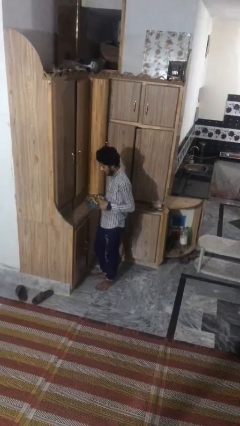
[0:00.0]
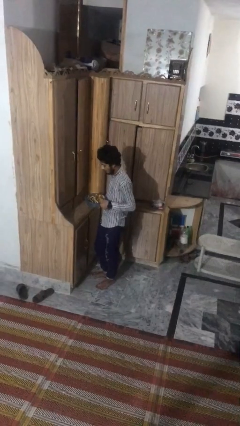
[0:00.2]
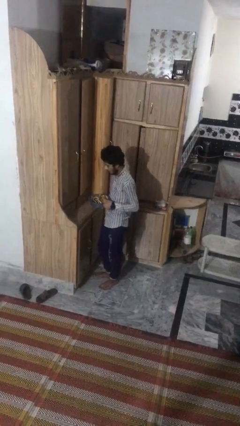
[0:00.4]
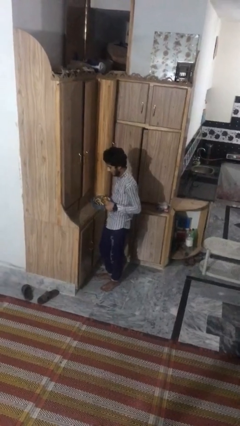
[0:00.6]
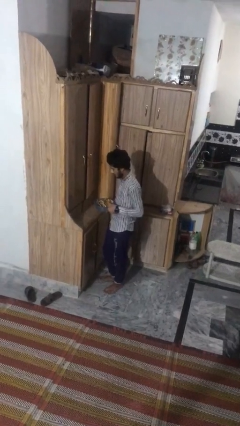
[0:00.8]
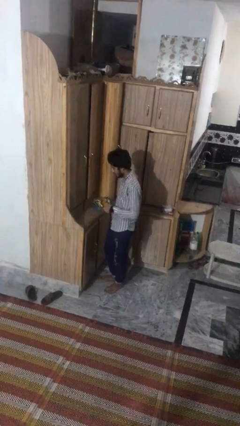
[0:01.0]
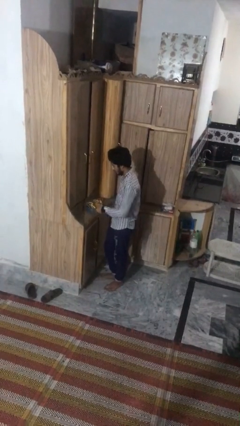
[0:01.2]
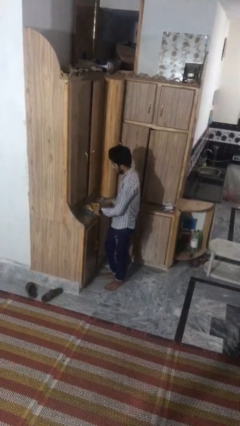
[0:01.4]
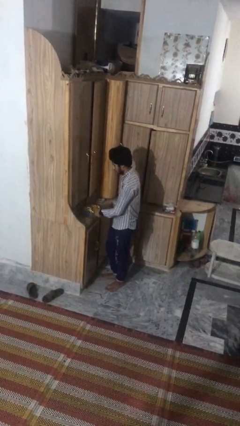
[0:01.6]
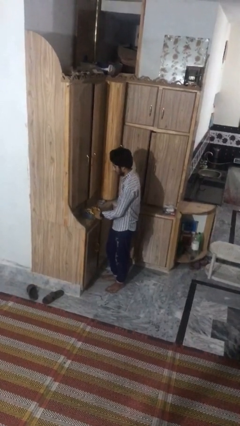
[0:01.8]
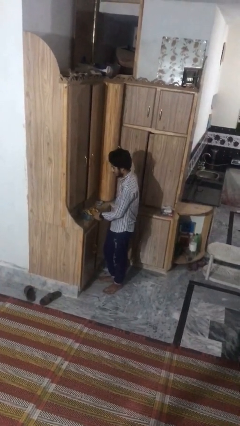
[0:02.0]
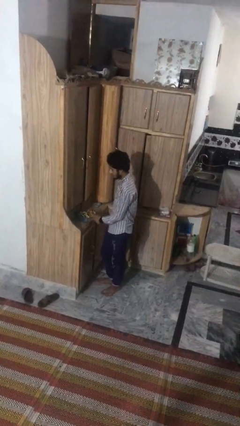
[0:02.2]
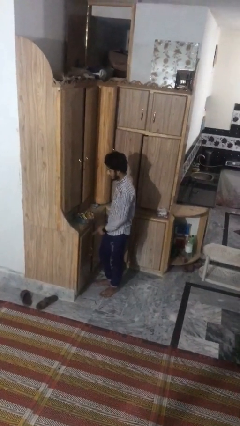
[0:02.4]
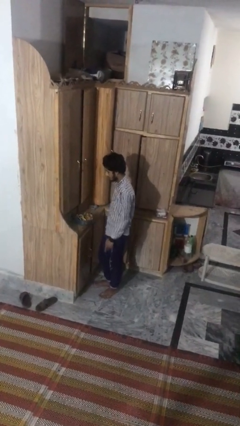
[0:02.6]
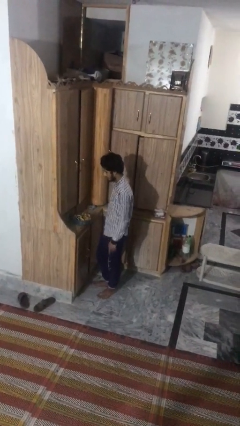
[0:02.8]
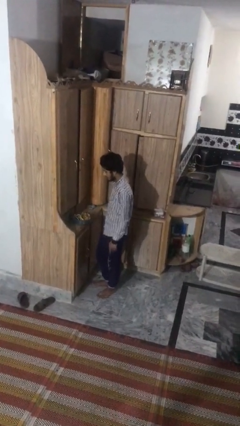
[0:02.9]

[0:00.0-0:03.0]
person puts down object on countertop

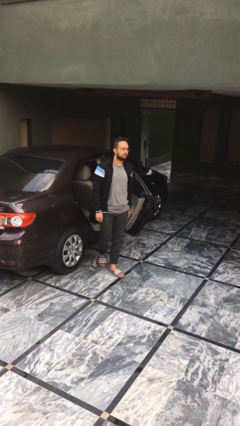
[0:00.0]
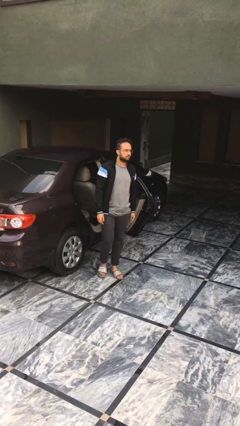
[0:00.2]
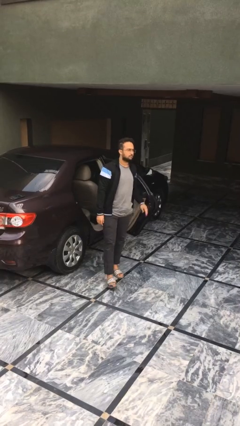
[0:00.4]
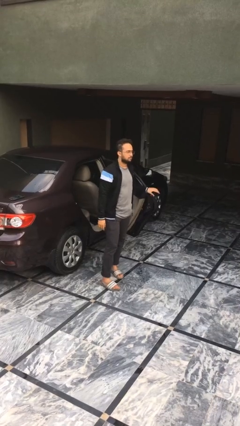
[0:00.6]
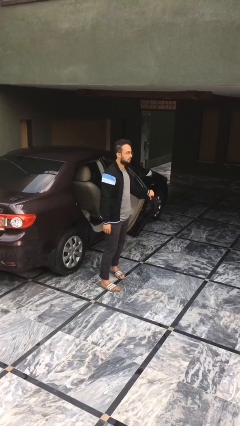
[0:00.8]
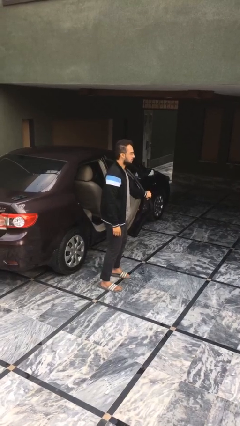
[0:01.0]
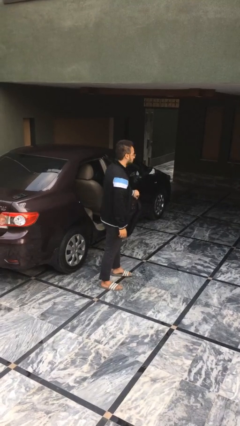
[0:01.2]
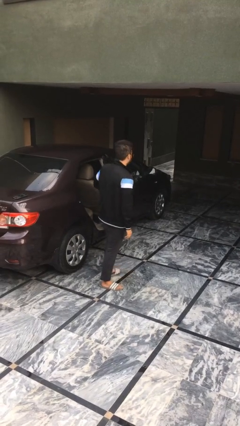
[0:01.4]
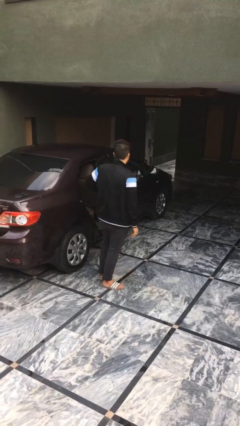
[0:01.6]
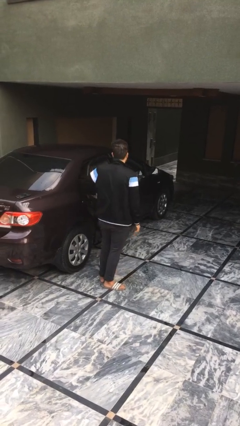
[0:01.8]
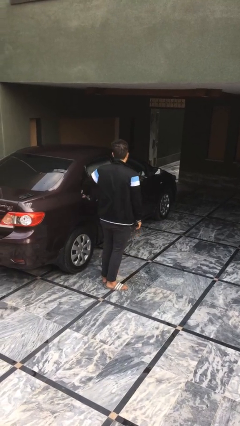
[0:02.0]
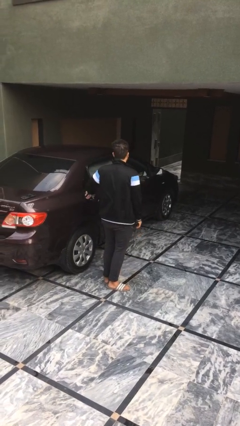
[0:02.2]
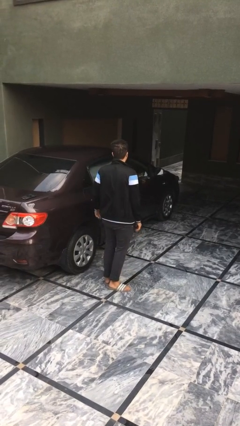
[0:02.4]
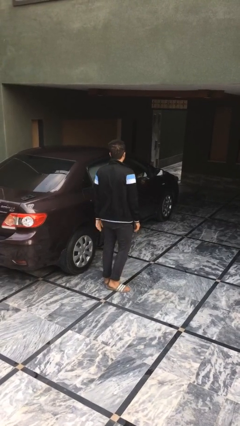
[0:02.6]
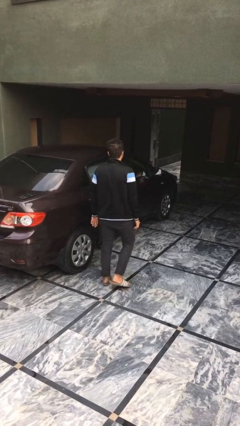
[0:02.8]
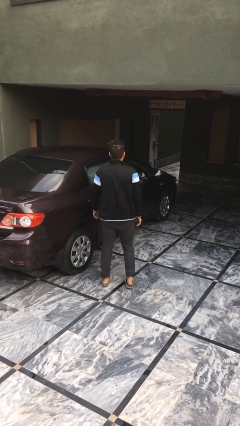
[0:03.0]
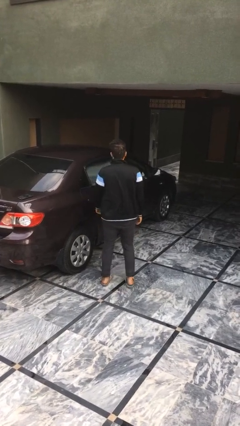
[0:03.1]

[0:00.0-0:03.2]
person closes car door

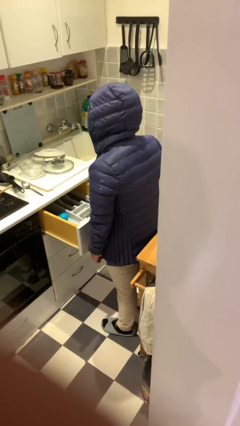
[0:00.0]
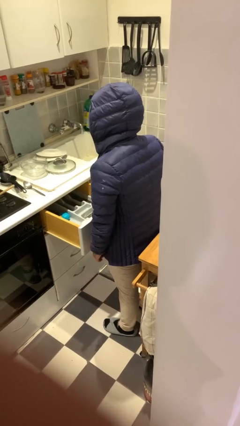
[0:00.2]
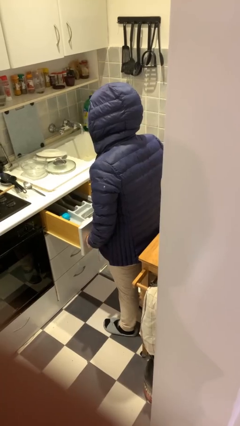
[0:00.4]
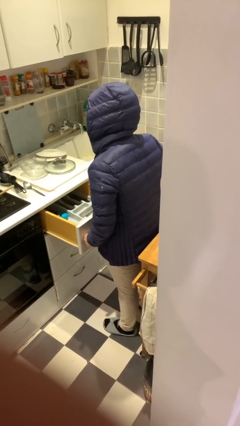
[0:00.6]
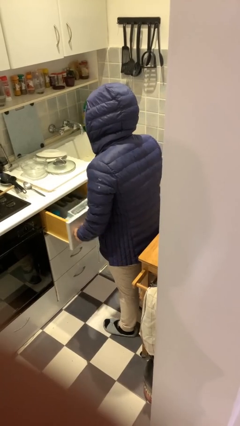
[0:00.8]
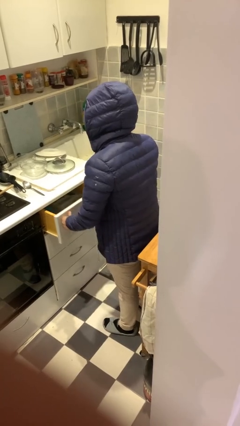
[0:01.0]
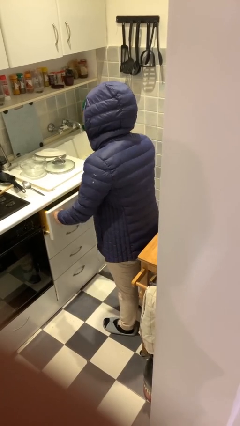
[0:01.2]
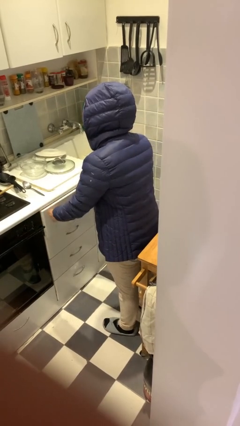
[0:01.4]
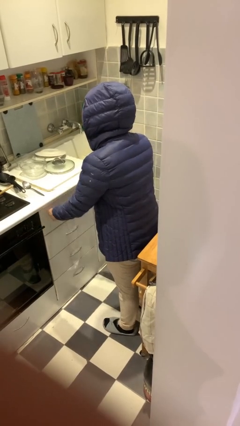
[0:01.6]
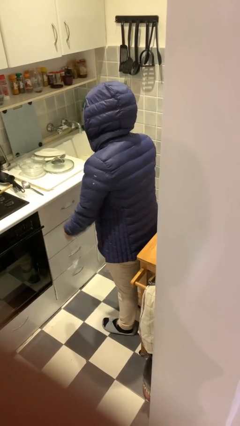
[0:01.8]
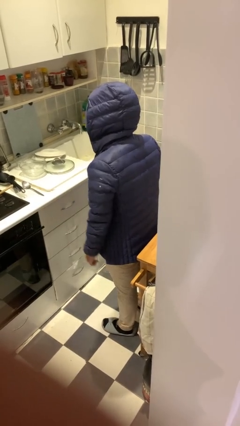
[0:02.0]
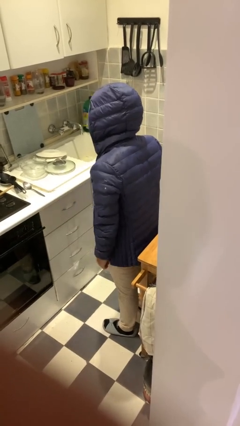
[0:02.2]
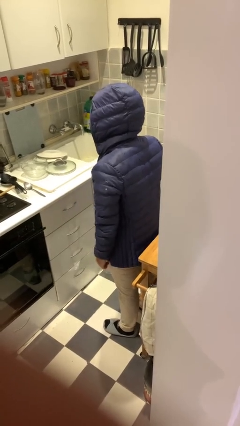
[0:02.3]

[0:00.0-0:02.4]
person closes kitchen drawer

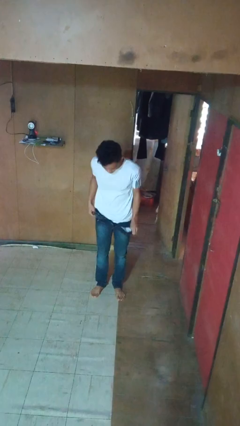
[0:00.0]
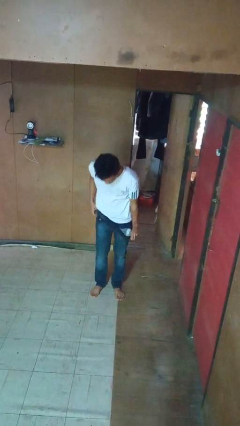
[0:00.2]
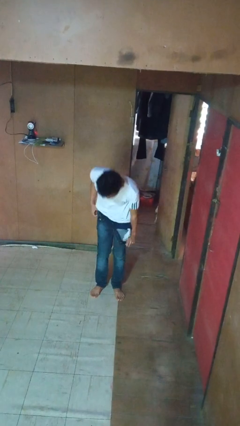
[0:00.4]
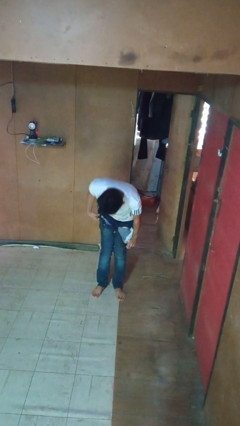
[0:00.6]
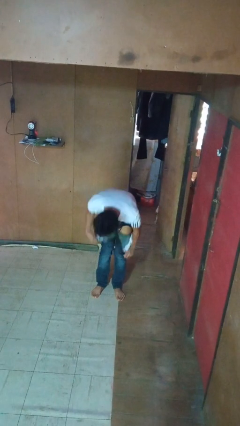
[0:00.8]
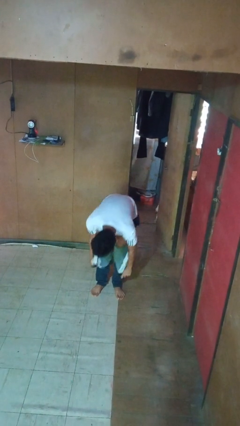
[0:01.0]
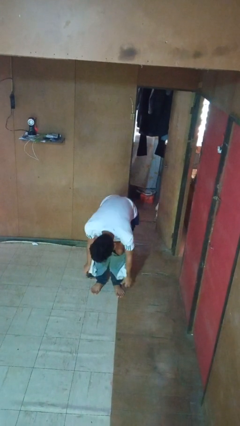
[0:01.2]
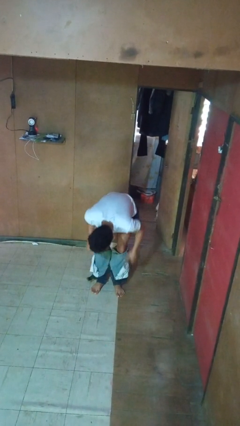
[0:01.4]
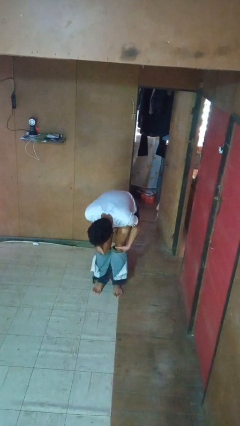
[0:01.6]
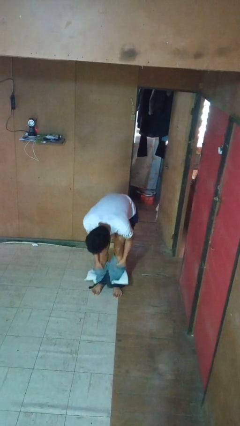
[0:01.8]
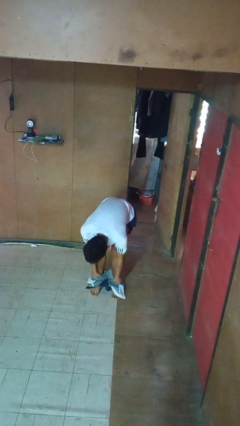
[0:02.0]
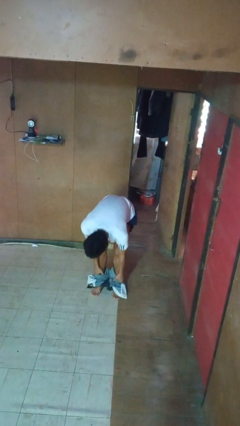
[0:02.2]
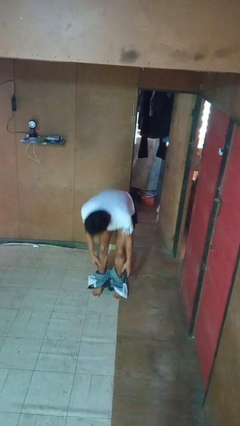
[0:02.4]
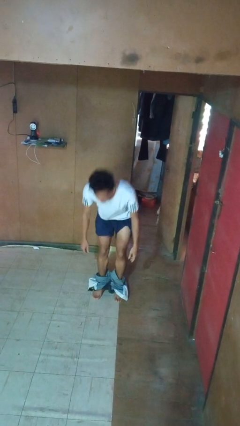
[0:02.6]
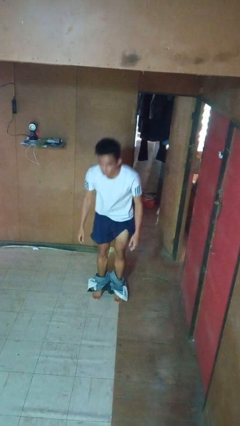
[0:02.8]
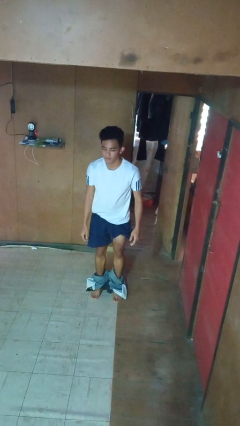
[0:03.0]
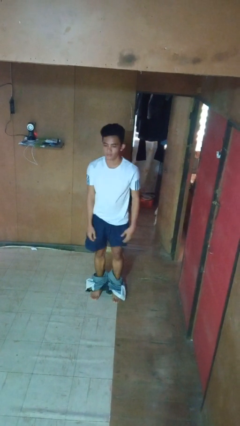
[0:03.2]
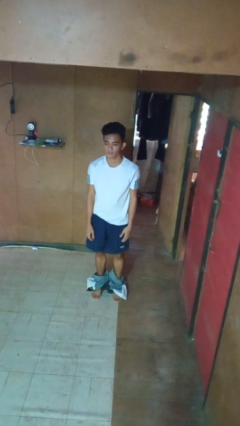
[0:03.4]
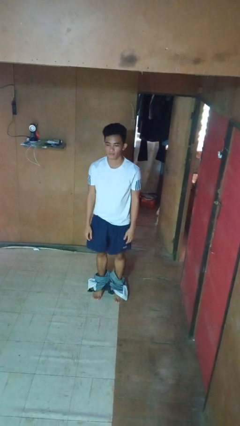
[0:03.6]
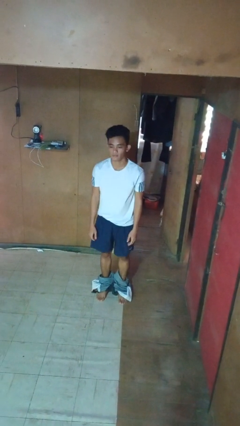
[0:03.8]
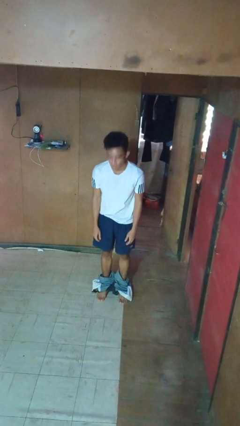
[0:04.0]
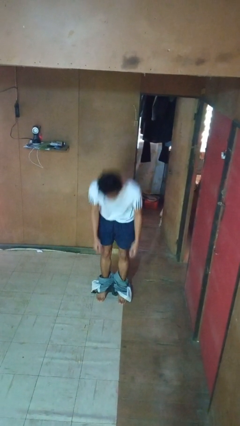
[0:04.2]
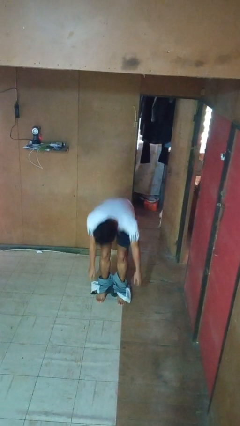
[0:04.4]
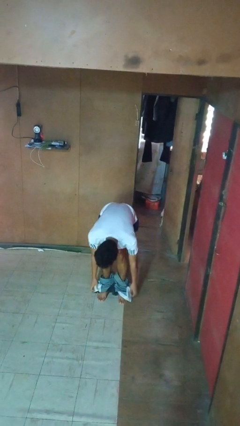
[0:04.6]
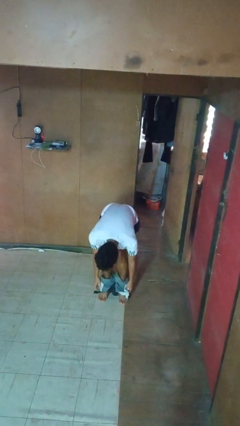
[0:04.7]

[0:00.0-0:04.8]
person takes off pants

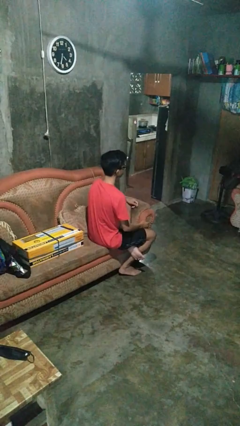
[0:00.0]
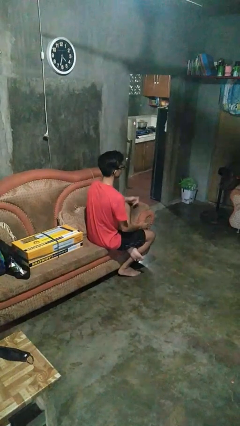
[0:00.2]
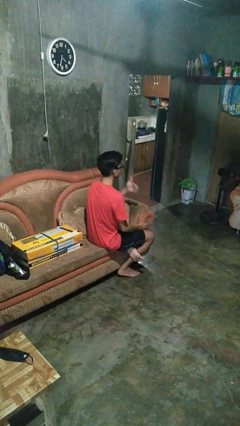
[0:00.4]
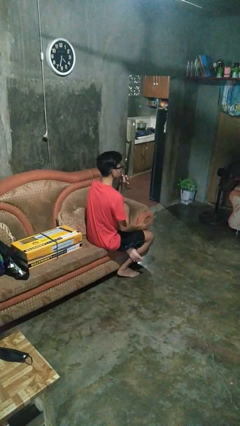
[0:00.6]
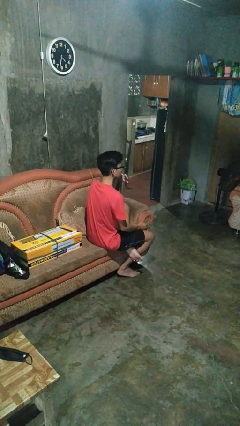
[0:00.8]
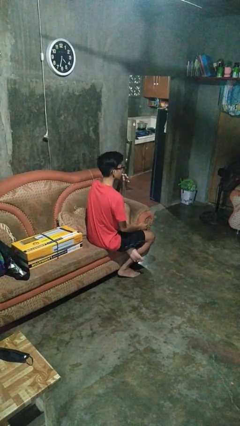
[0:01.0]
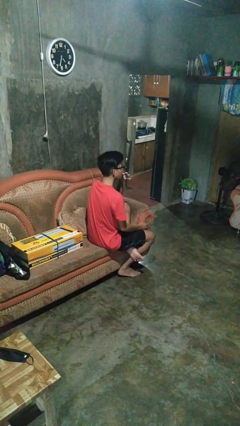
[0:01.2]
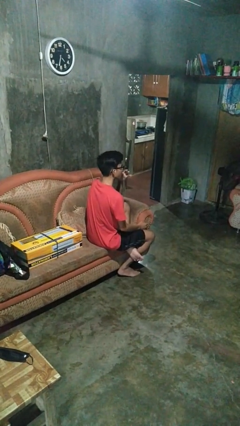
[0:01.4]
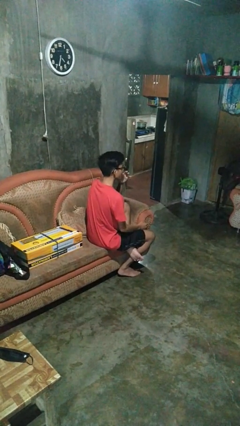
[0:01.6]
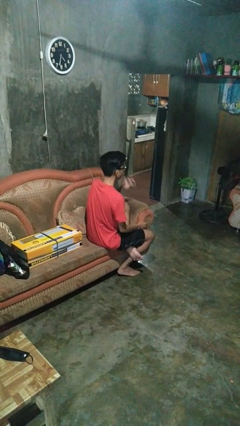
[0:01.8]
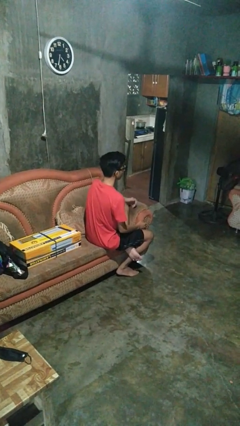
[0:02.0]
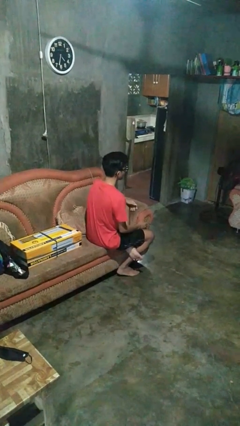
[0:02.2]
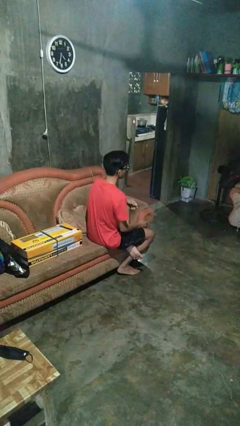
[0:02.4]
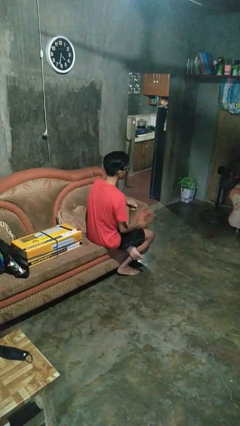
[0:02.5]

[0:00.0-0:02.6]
person licks fingers

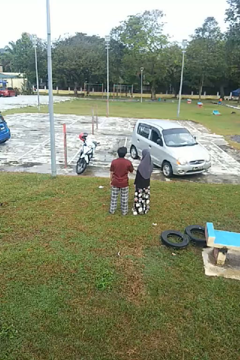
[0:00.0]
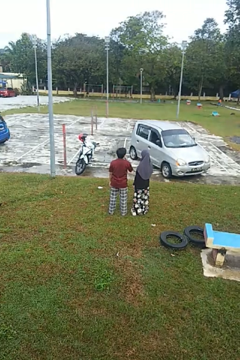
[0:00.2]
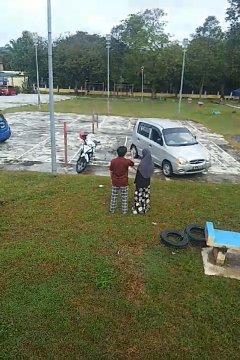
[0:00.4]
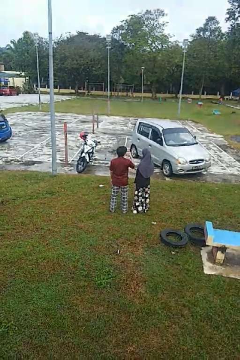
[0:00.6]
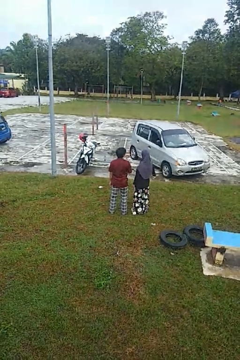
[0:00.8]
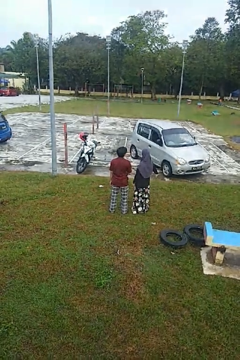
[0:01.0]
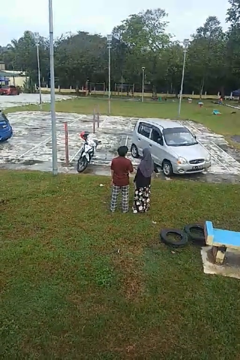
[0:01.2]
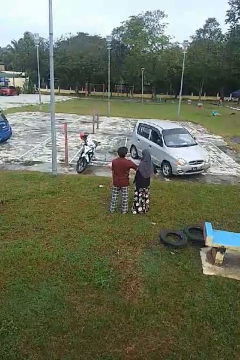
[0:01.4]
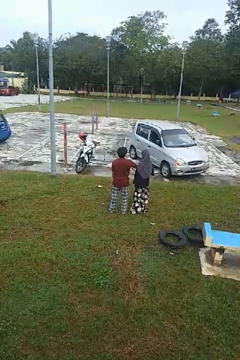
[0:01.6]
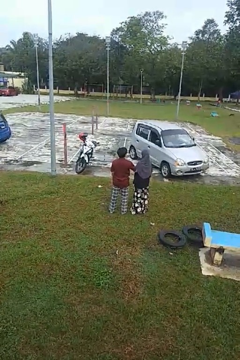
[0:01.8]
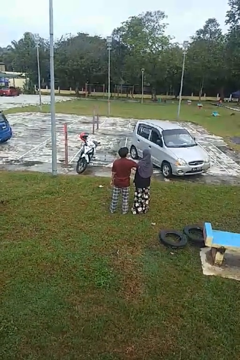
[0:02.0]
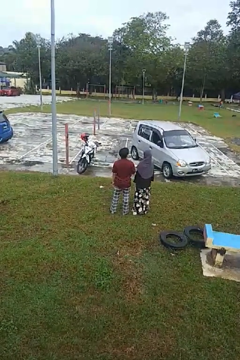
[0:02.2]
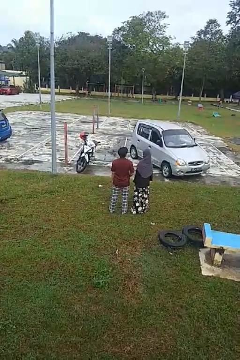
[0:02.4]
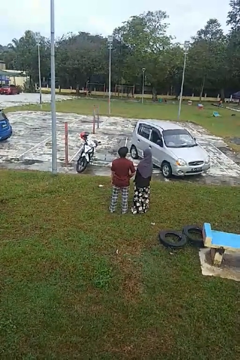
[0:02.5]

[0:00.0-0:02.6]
person nudges person with elbow
